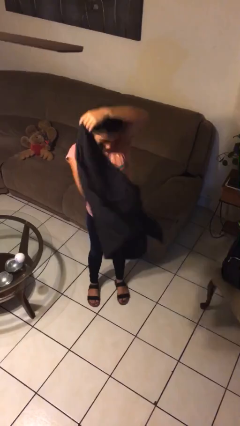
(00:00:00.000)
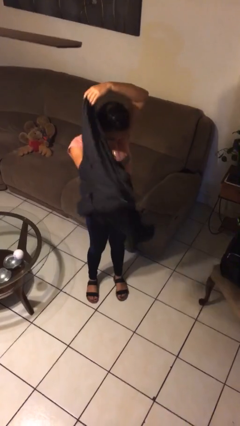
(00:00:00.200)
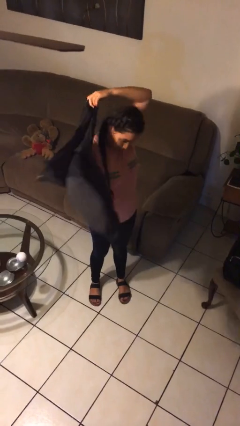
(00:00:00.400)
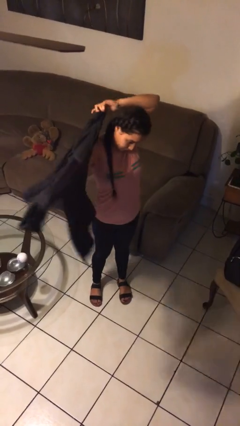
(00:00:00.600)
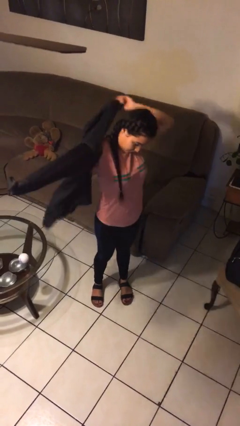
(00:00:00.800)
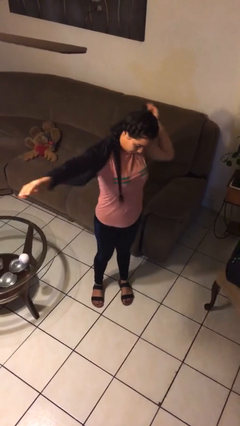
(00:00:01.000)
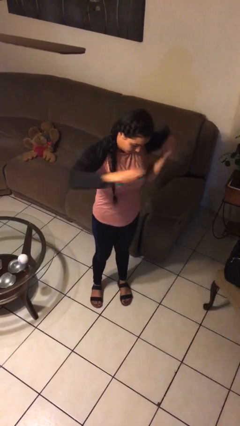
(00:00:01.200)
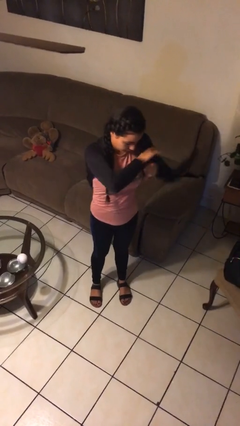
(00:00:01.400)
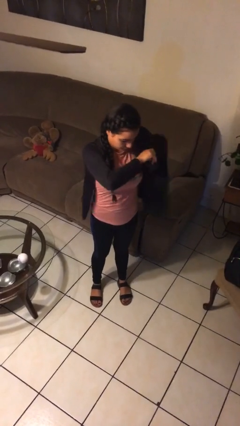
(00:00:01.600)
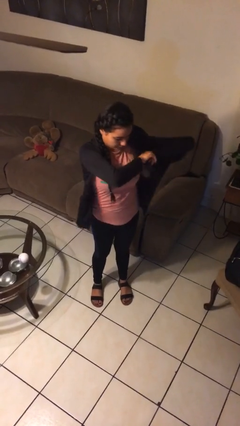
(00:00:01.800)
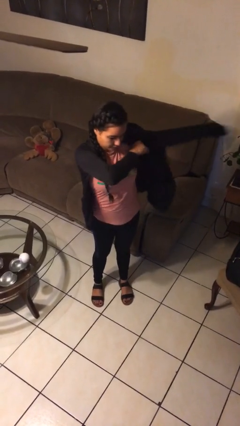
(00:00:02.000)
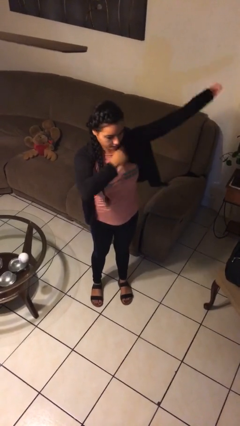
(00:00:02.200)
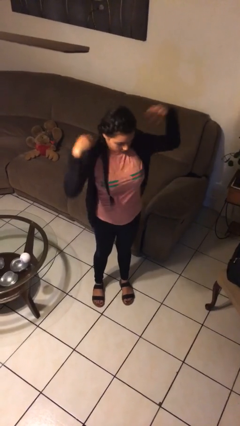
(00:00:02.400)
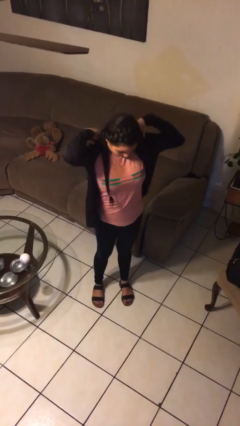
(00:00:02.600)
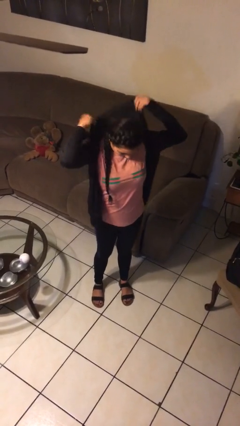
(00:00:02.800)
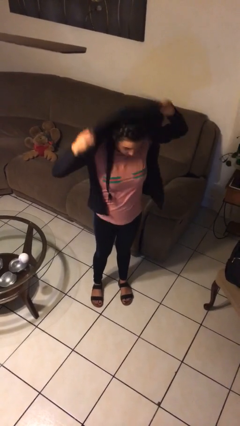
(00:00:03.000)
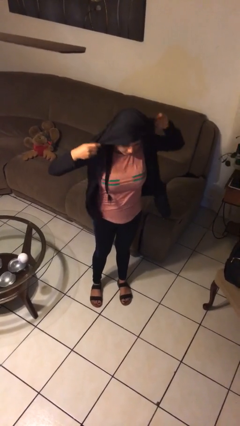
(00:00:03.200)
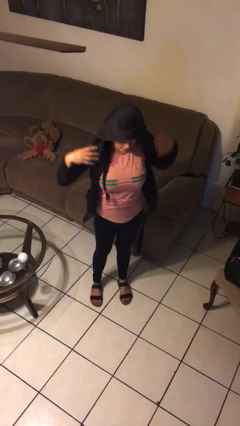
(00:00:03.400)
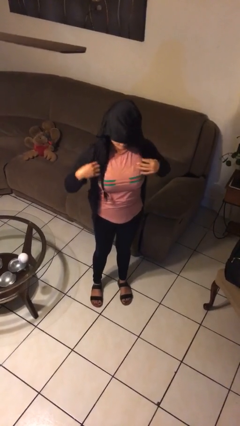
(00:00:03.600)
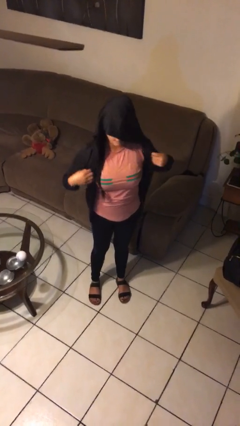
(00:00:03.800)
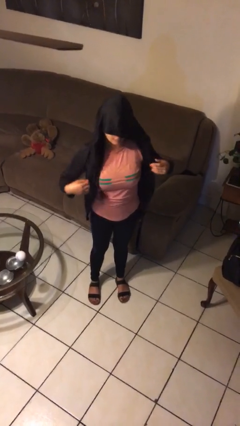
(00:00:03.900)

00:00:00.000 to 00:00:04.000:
person puts on hoodie

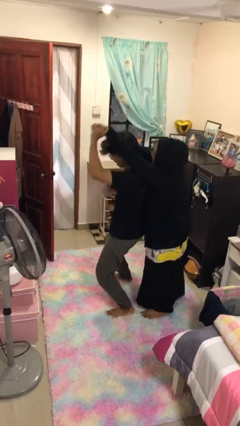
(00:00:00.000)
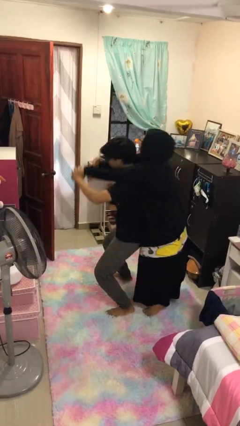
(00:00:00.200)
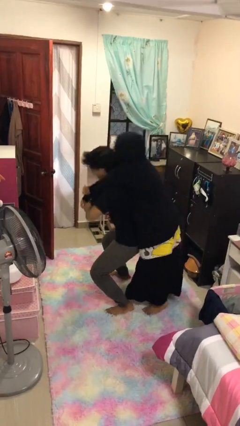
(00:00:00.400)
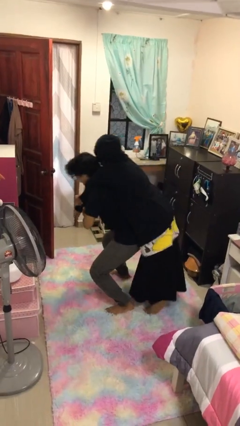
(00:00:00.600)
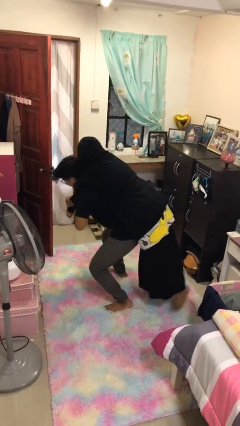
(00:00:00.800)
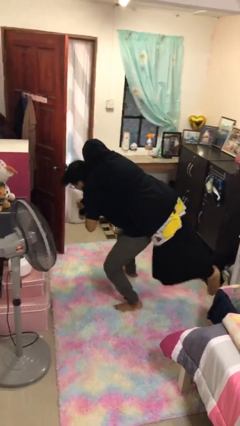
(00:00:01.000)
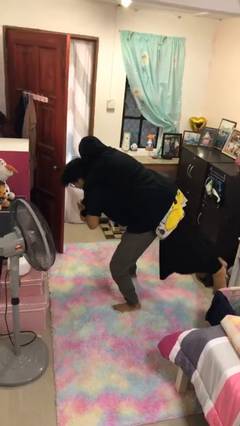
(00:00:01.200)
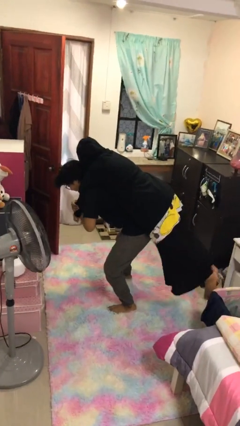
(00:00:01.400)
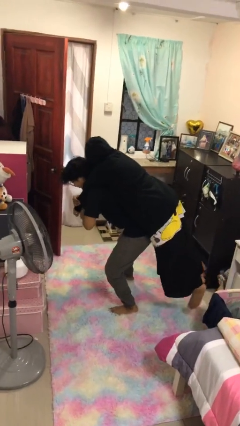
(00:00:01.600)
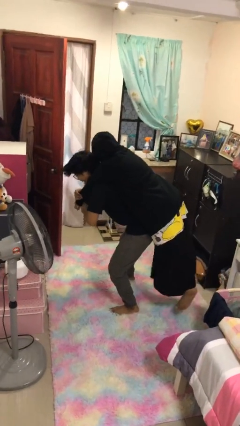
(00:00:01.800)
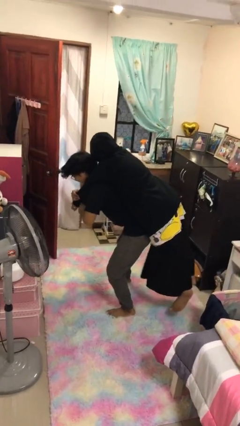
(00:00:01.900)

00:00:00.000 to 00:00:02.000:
person picks up person

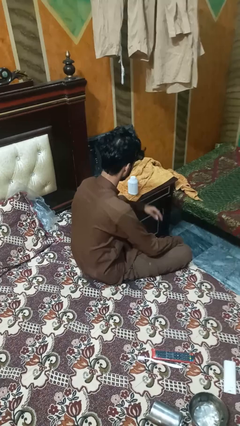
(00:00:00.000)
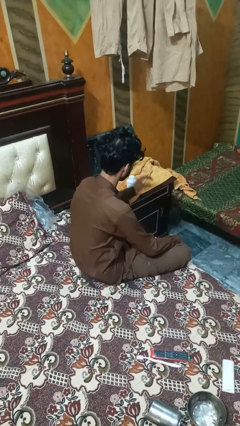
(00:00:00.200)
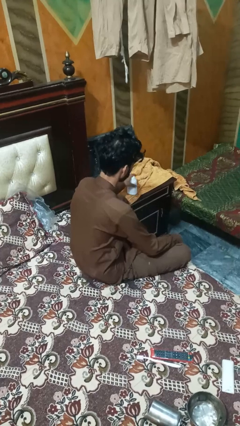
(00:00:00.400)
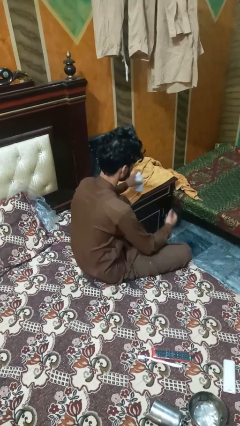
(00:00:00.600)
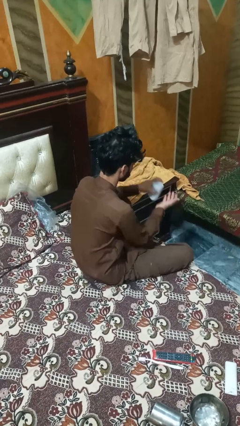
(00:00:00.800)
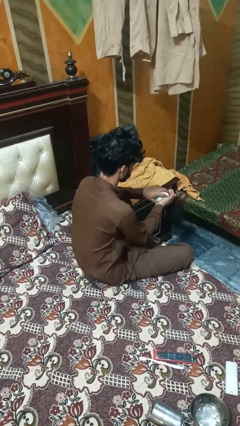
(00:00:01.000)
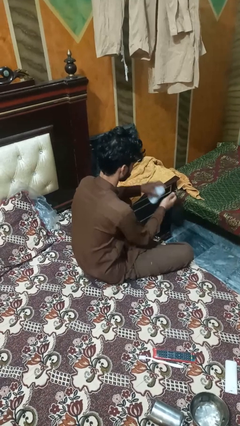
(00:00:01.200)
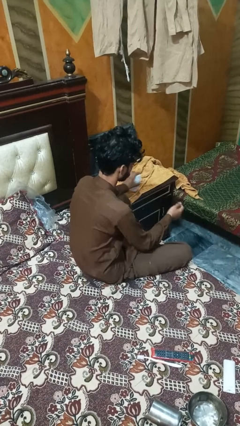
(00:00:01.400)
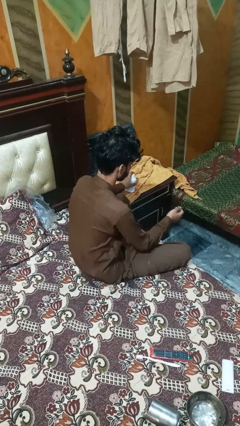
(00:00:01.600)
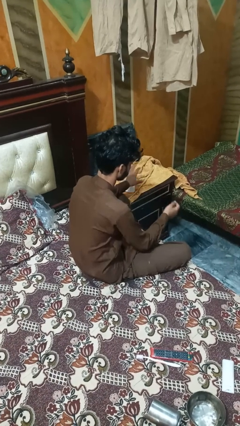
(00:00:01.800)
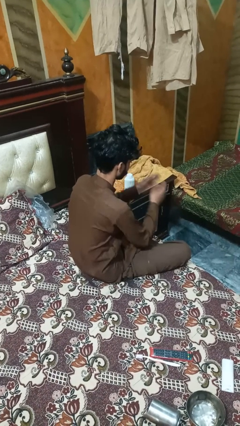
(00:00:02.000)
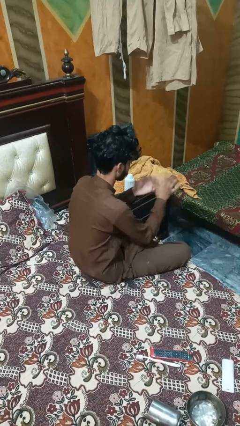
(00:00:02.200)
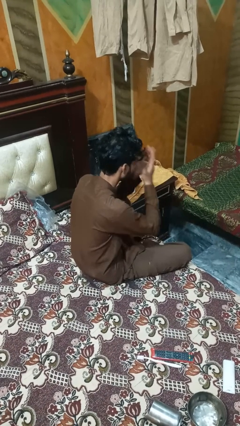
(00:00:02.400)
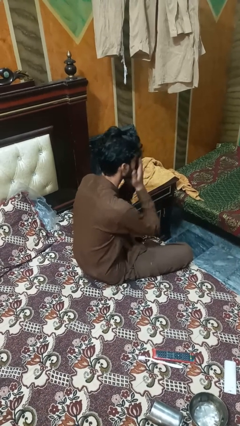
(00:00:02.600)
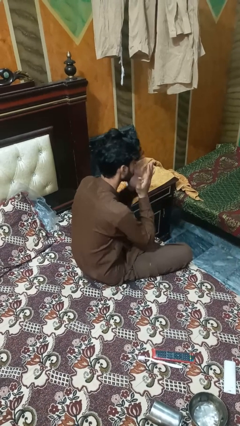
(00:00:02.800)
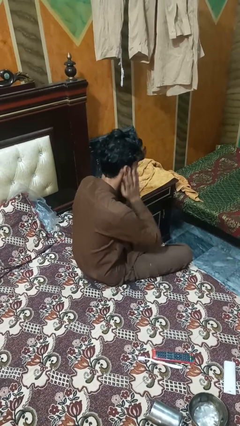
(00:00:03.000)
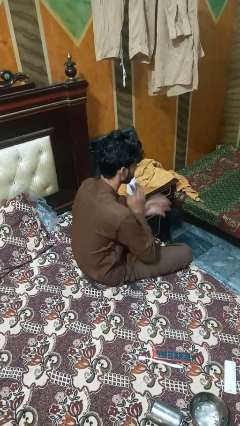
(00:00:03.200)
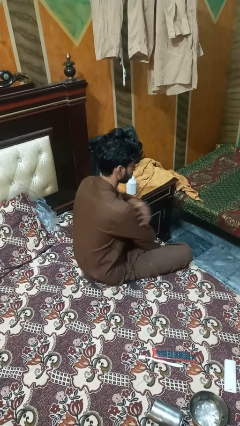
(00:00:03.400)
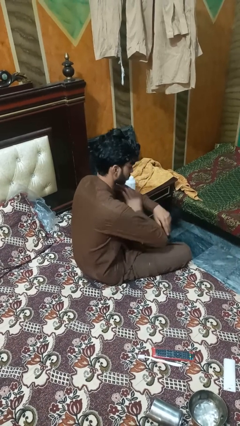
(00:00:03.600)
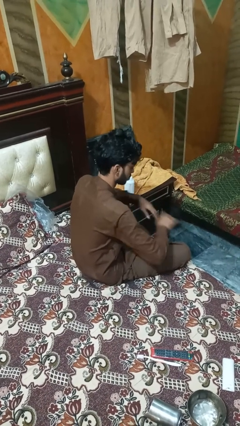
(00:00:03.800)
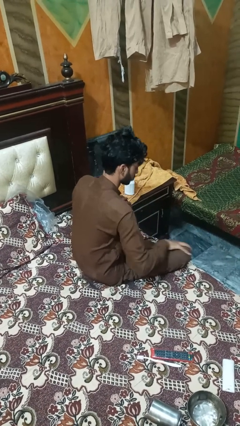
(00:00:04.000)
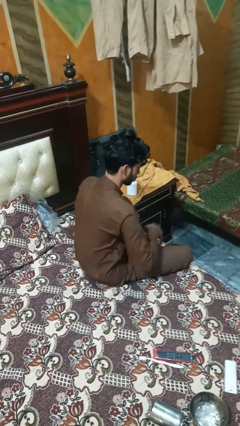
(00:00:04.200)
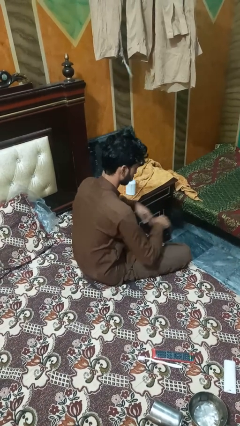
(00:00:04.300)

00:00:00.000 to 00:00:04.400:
person applies sunscreen

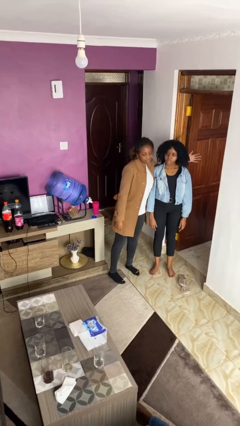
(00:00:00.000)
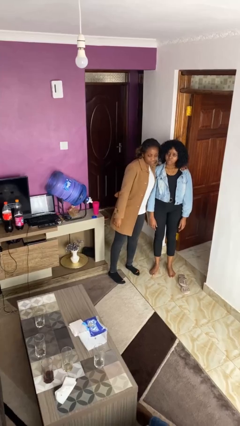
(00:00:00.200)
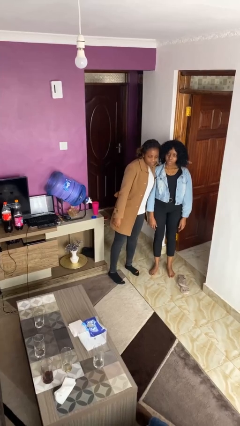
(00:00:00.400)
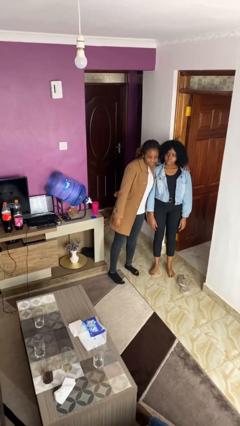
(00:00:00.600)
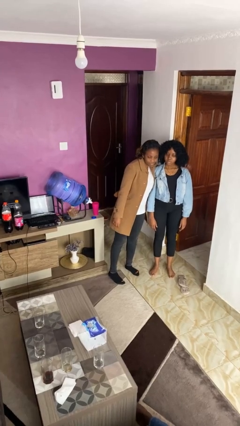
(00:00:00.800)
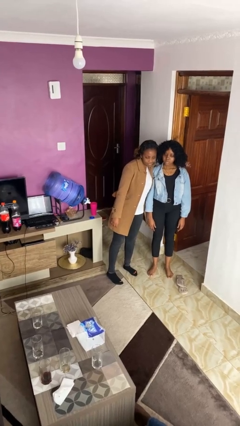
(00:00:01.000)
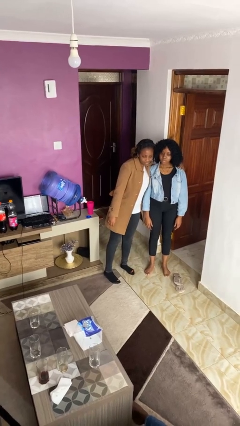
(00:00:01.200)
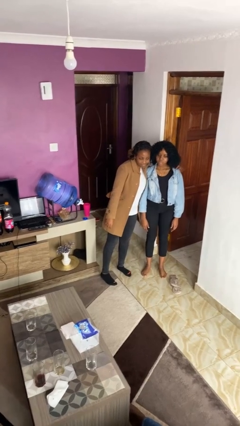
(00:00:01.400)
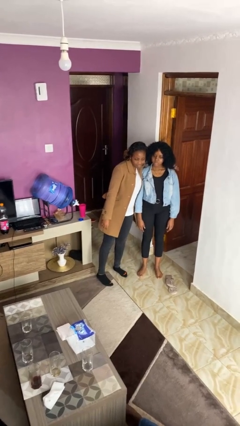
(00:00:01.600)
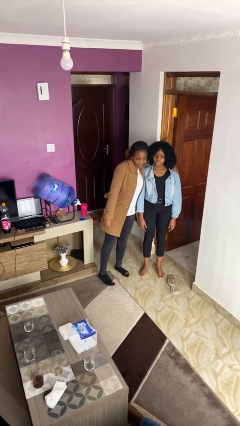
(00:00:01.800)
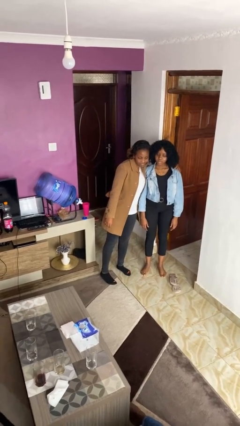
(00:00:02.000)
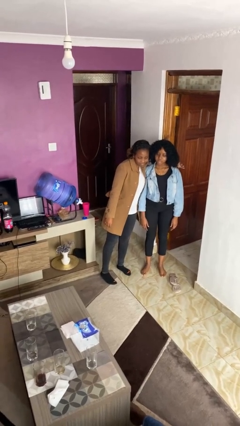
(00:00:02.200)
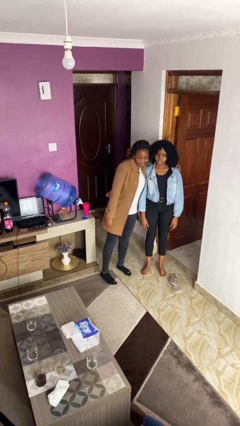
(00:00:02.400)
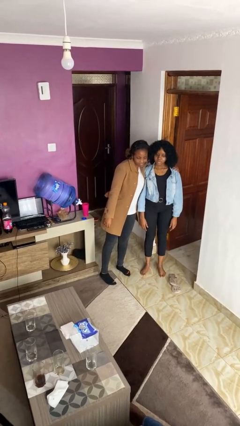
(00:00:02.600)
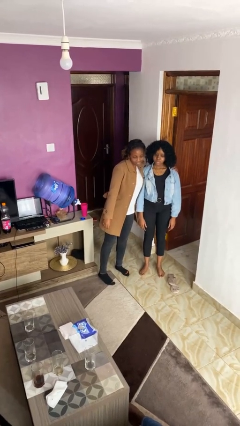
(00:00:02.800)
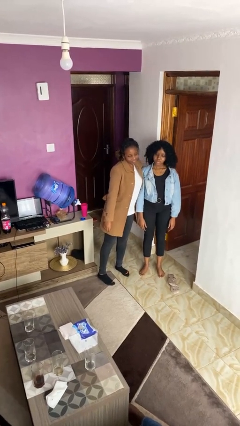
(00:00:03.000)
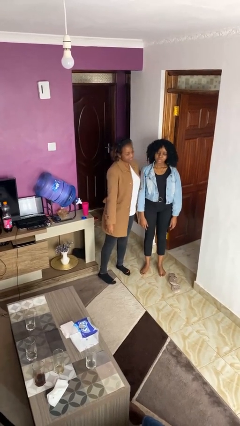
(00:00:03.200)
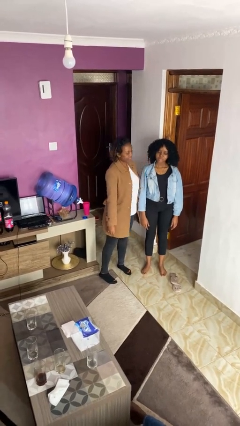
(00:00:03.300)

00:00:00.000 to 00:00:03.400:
person pounds shoulders of person

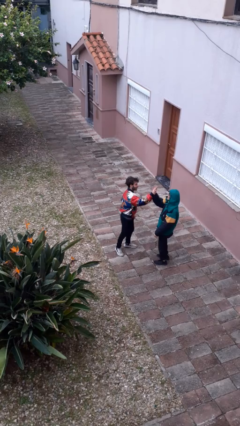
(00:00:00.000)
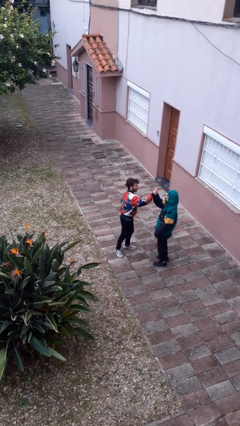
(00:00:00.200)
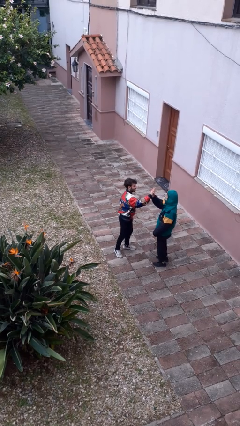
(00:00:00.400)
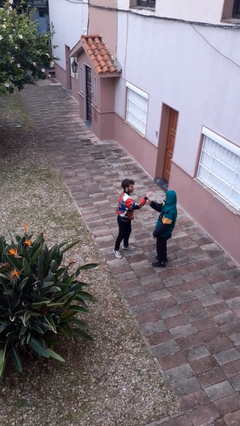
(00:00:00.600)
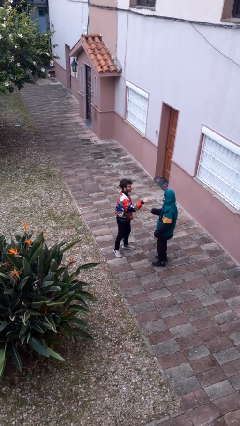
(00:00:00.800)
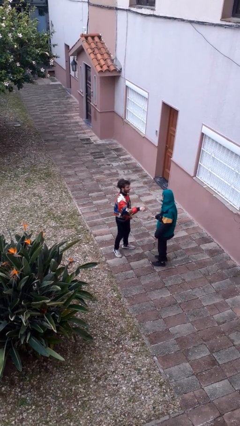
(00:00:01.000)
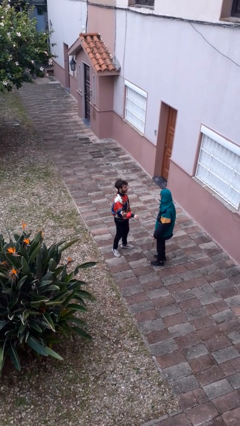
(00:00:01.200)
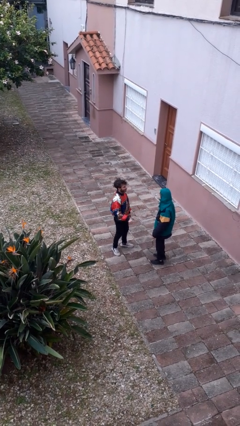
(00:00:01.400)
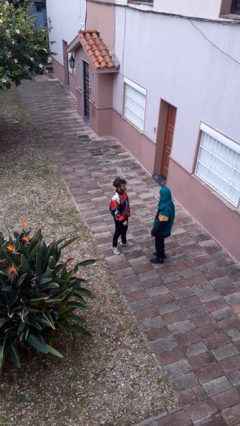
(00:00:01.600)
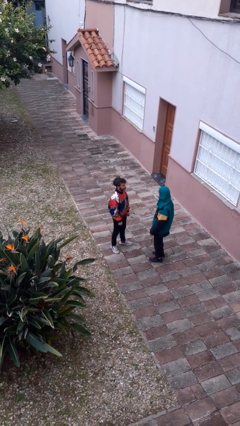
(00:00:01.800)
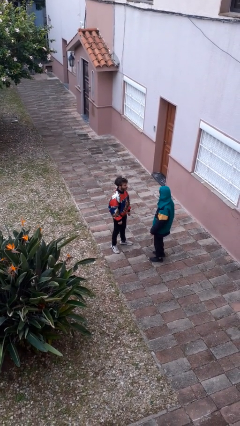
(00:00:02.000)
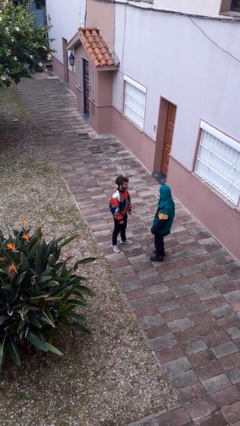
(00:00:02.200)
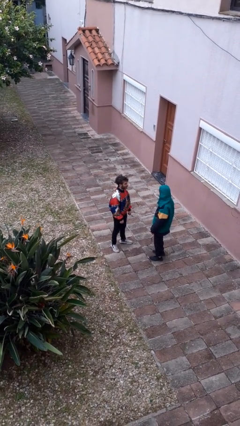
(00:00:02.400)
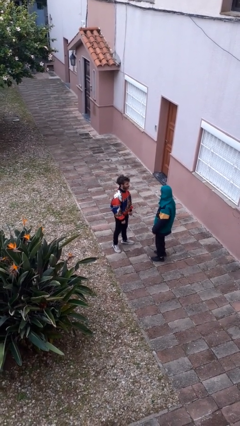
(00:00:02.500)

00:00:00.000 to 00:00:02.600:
person highfives hand

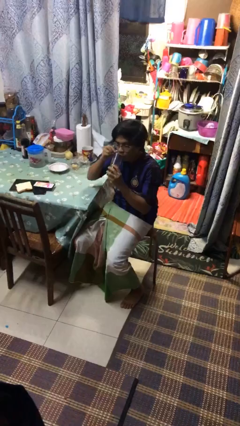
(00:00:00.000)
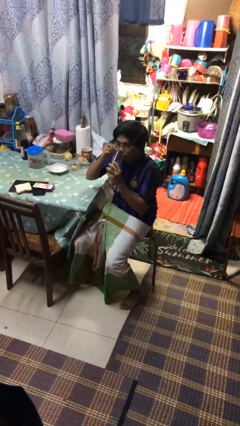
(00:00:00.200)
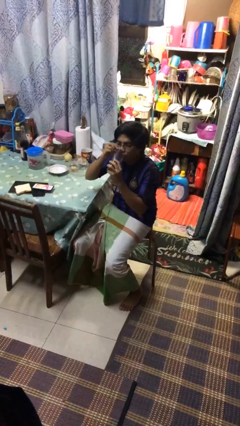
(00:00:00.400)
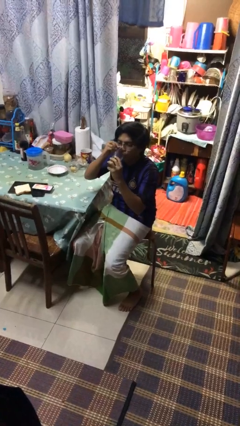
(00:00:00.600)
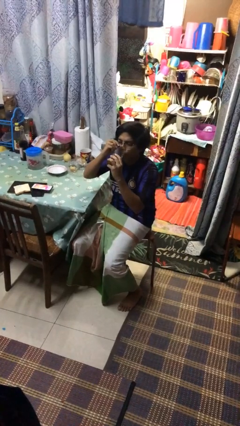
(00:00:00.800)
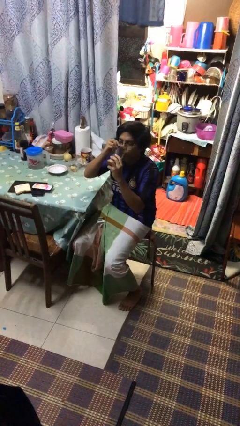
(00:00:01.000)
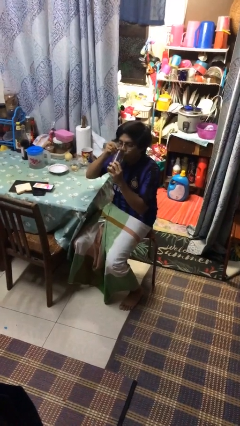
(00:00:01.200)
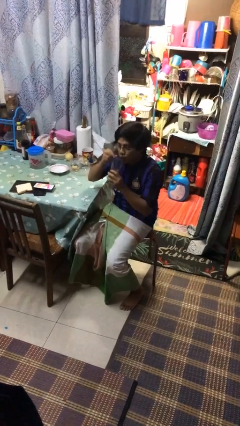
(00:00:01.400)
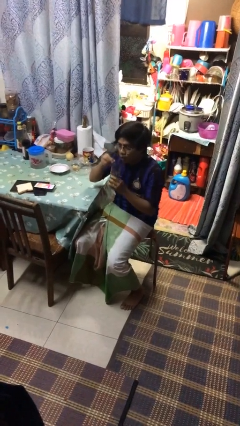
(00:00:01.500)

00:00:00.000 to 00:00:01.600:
person drinks from mug
